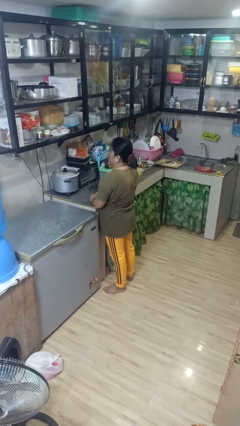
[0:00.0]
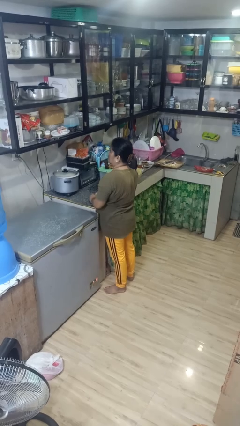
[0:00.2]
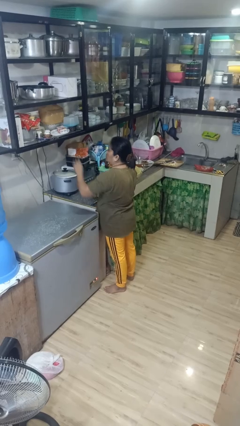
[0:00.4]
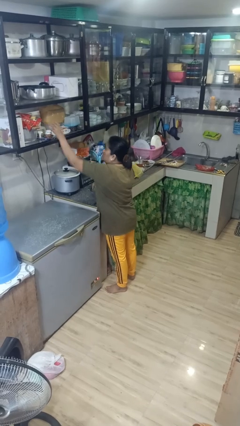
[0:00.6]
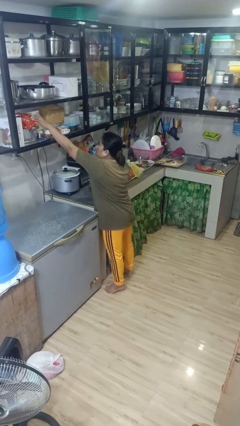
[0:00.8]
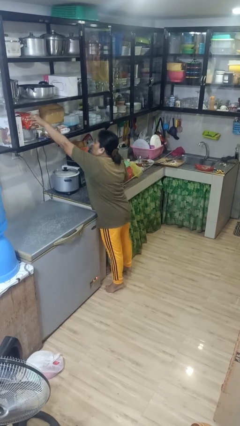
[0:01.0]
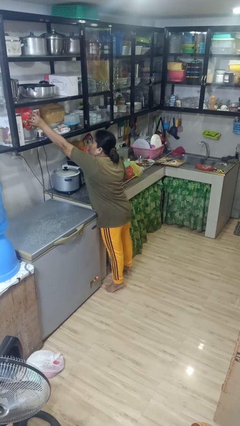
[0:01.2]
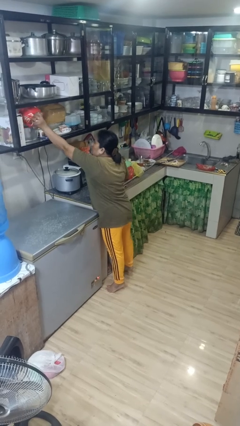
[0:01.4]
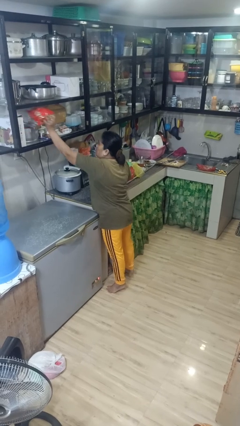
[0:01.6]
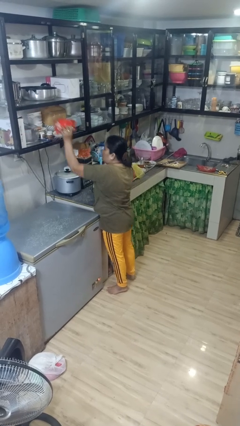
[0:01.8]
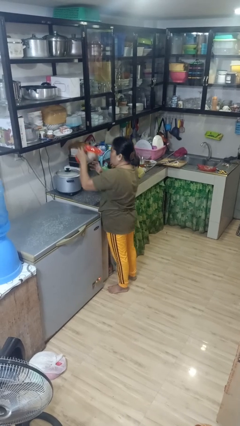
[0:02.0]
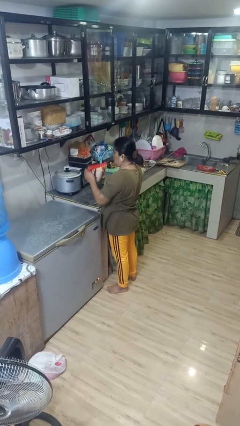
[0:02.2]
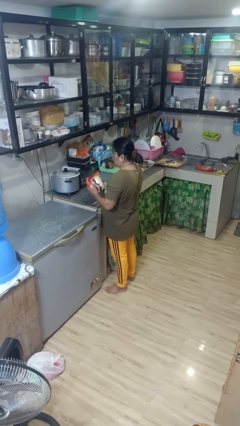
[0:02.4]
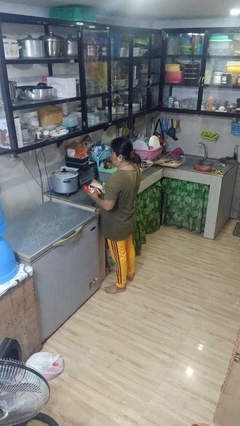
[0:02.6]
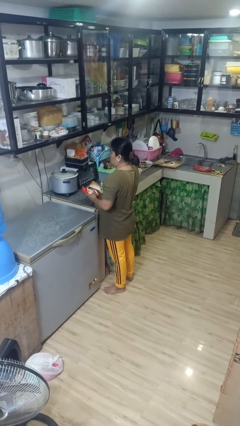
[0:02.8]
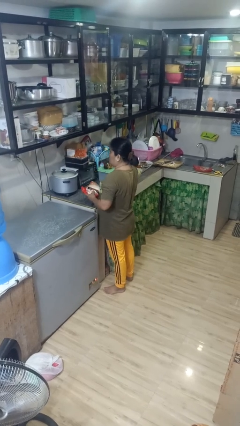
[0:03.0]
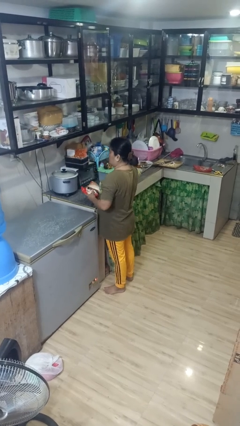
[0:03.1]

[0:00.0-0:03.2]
person takes object from cabinet

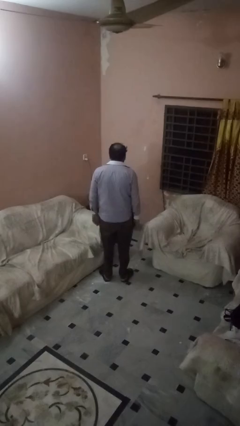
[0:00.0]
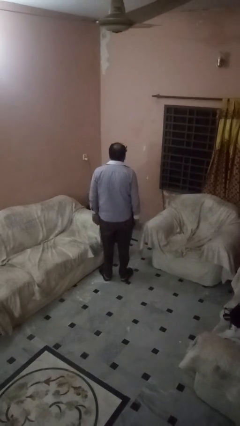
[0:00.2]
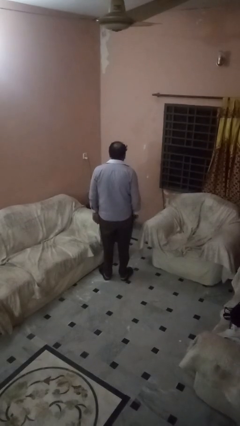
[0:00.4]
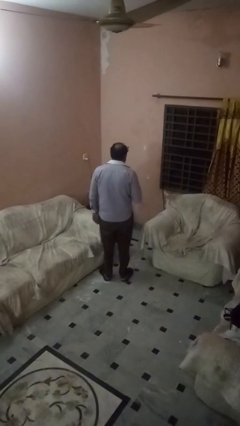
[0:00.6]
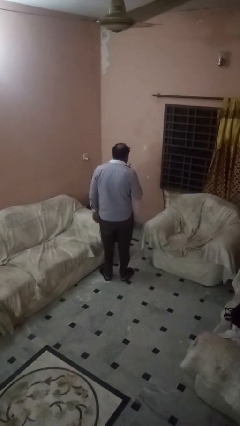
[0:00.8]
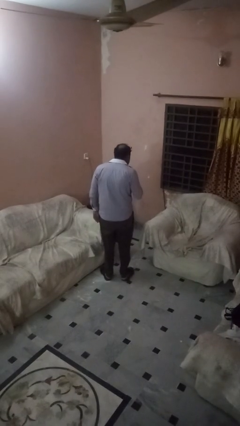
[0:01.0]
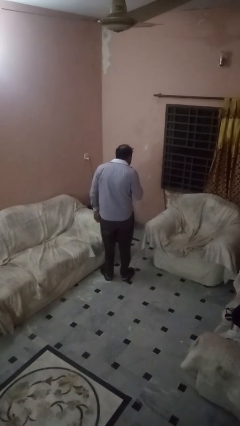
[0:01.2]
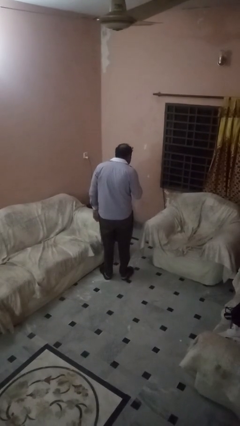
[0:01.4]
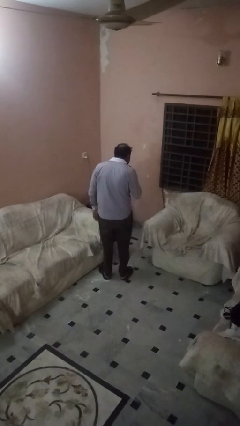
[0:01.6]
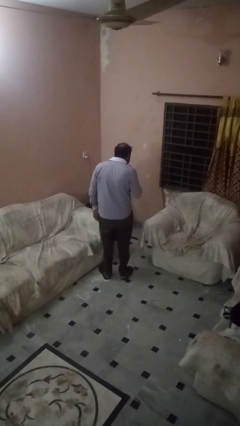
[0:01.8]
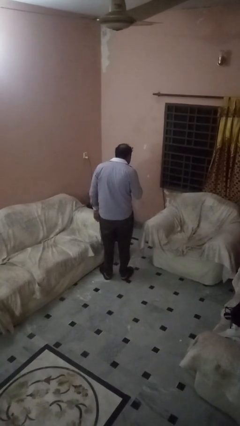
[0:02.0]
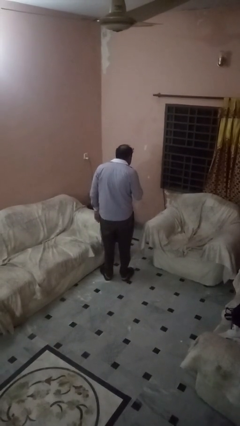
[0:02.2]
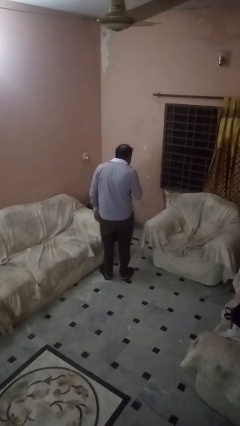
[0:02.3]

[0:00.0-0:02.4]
person gestures be quiet

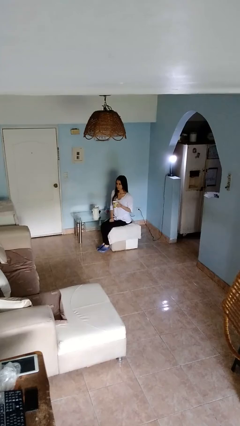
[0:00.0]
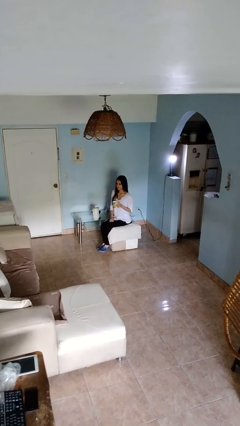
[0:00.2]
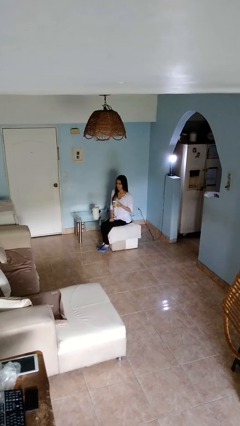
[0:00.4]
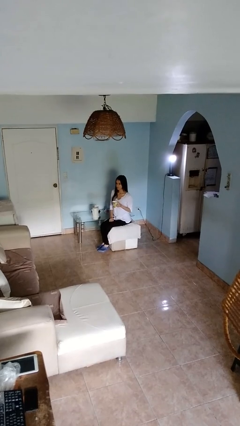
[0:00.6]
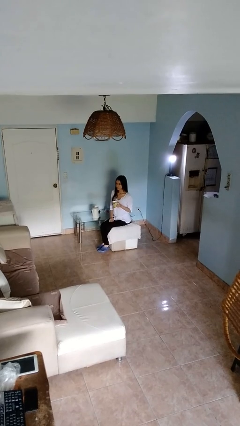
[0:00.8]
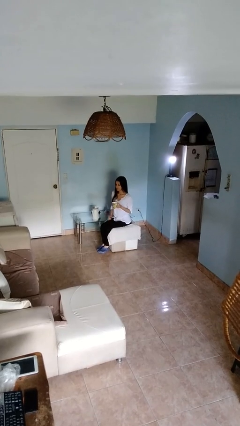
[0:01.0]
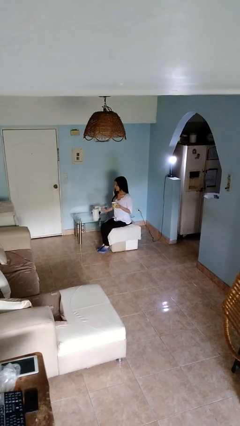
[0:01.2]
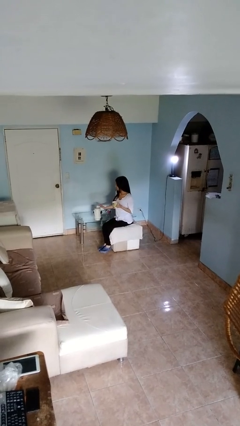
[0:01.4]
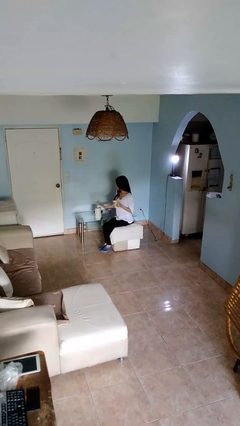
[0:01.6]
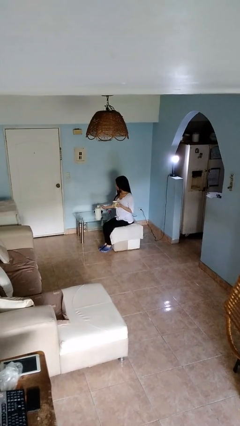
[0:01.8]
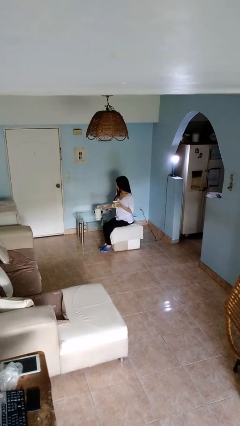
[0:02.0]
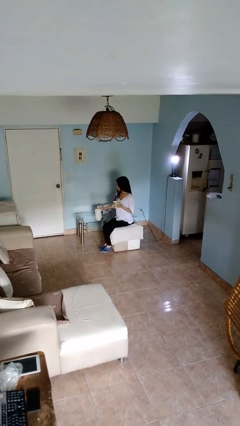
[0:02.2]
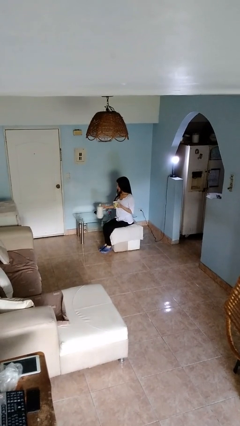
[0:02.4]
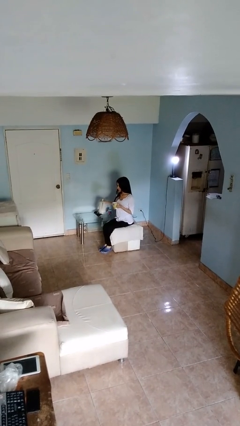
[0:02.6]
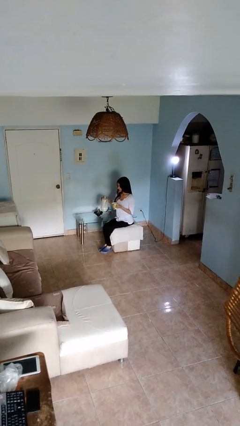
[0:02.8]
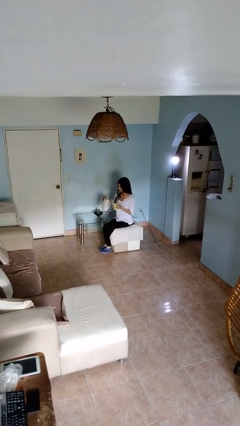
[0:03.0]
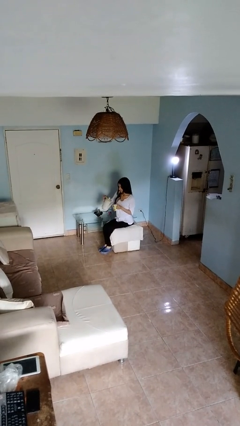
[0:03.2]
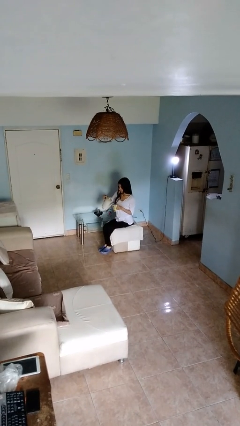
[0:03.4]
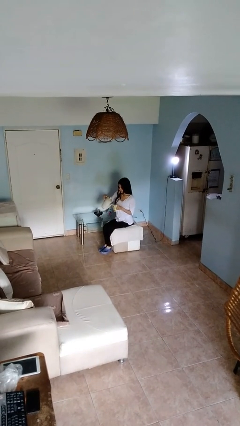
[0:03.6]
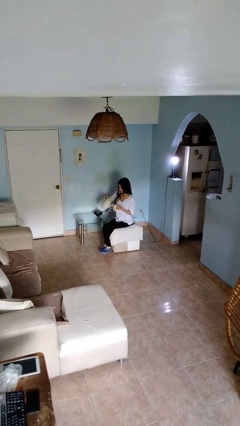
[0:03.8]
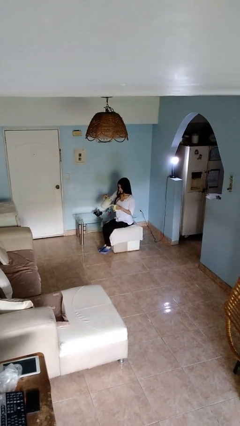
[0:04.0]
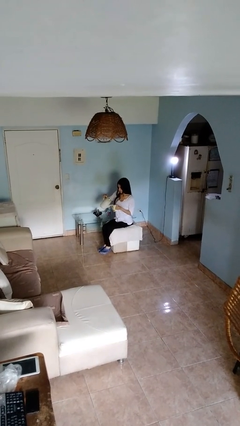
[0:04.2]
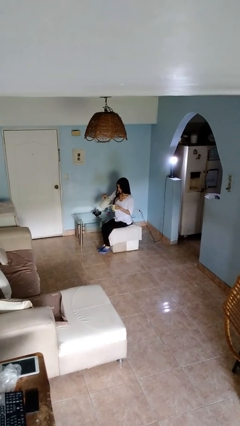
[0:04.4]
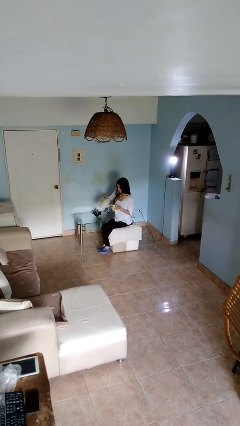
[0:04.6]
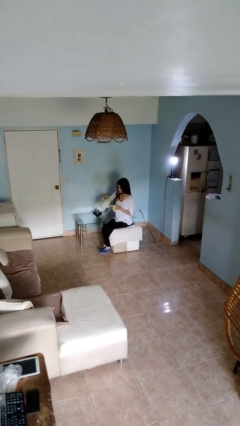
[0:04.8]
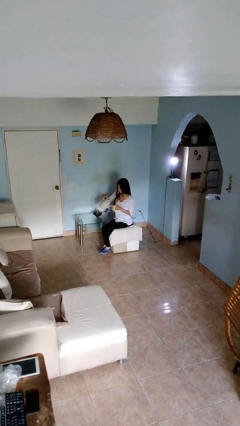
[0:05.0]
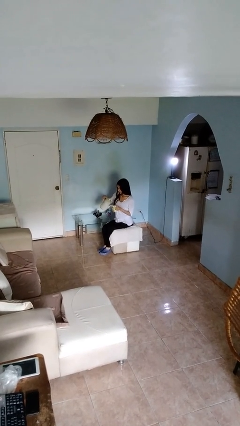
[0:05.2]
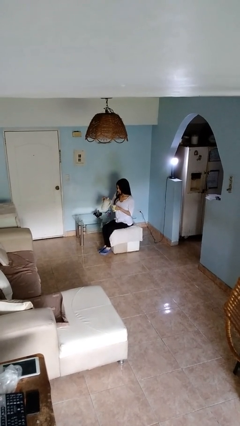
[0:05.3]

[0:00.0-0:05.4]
person pours coffee into mug

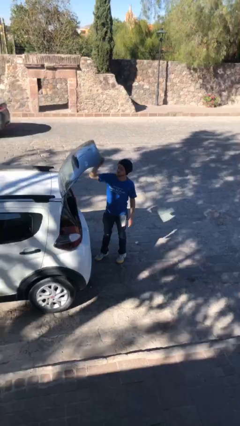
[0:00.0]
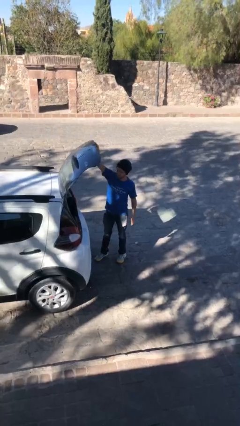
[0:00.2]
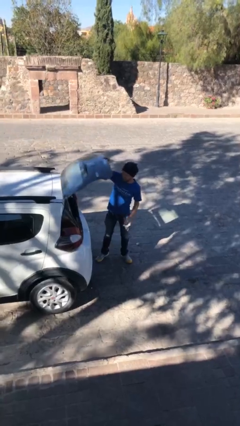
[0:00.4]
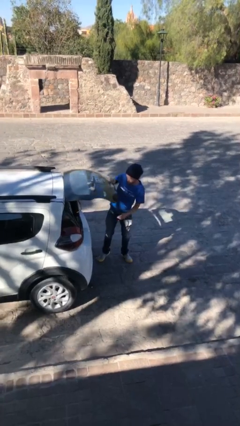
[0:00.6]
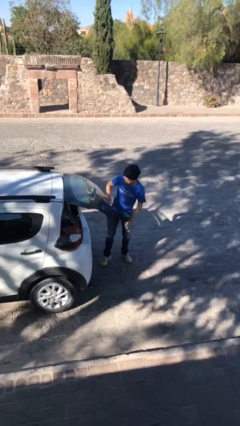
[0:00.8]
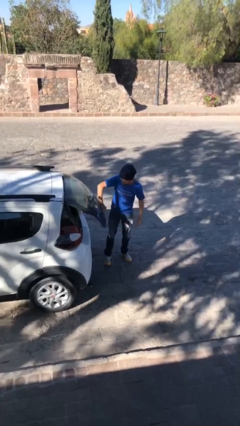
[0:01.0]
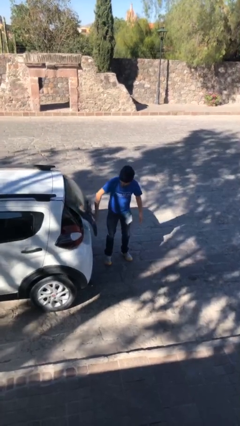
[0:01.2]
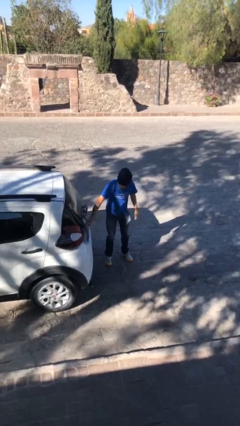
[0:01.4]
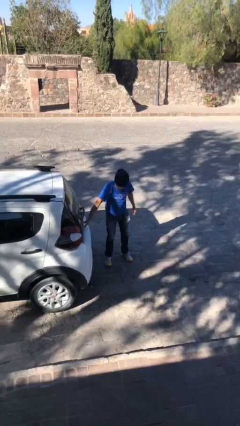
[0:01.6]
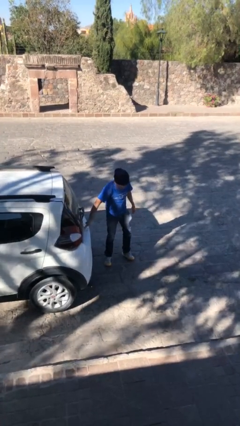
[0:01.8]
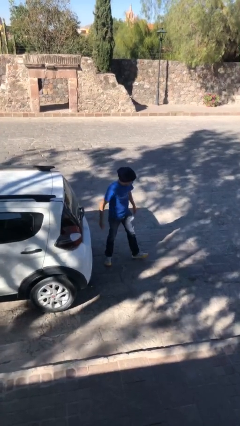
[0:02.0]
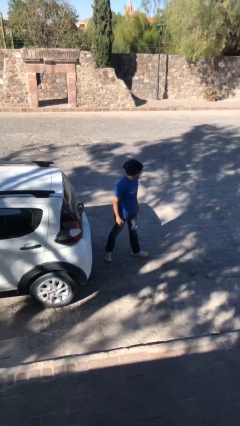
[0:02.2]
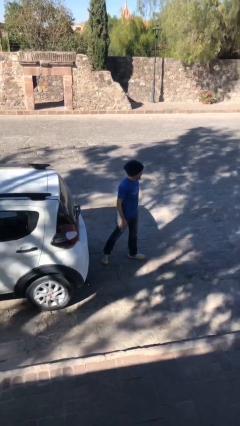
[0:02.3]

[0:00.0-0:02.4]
person closes car trunk

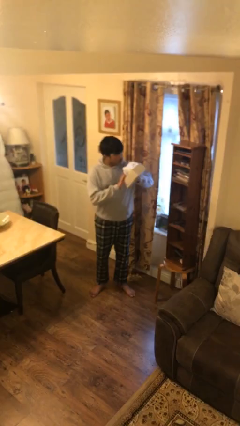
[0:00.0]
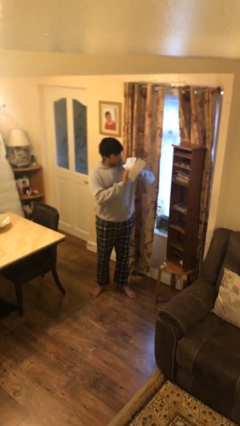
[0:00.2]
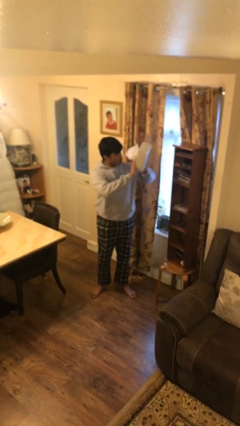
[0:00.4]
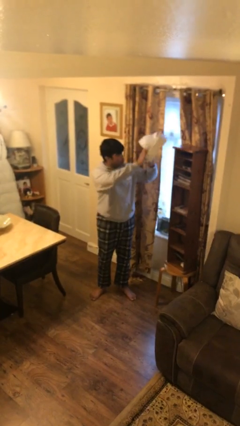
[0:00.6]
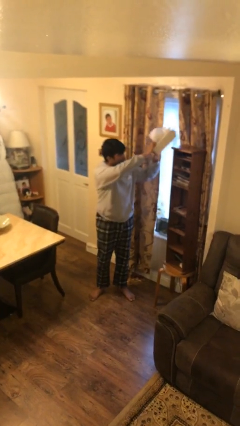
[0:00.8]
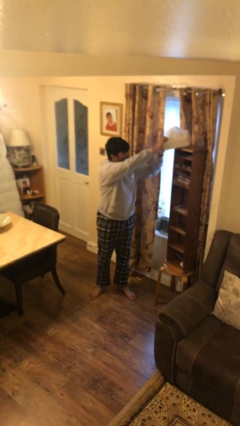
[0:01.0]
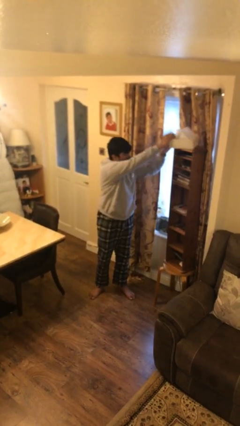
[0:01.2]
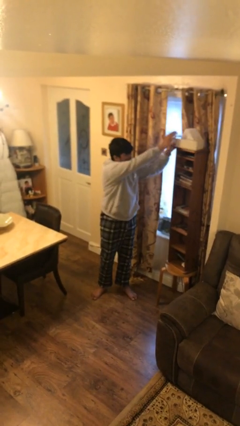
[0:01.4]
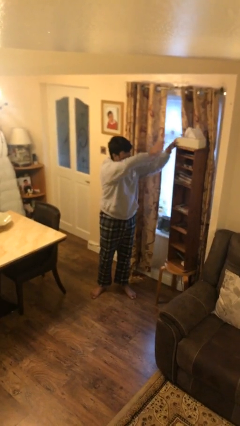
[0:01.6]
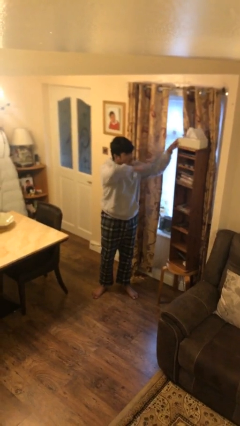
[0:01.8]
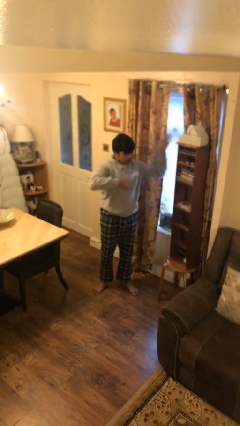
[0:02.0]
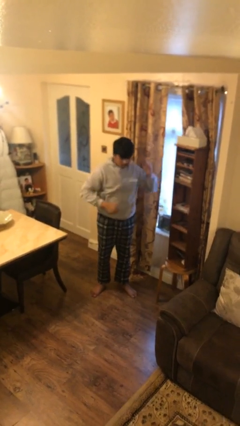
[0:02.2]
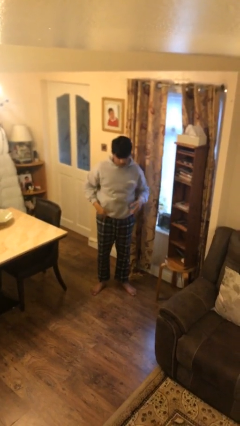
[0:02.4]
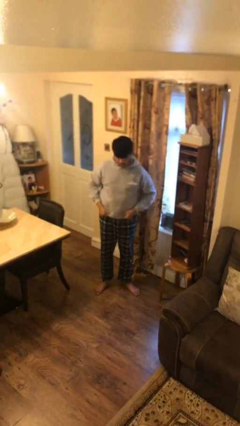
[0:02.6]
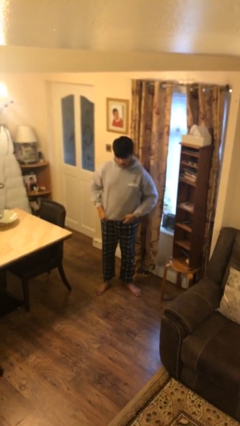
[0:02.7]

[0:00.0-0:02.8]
person puts down object on shelf

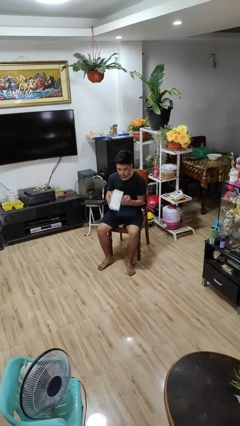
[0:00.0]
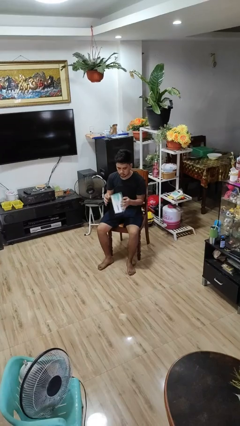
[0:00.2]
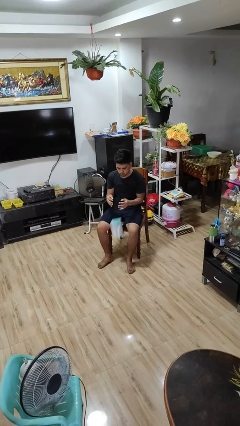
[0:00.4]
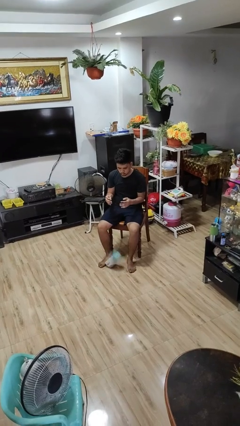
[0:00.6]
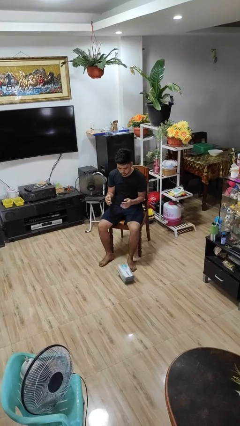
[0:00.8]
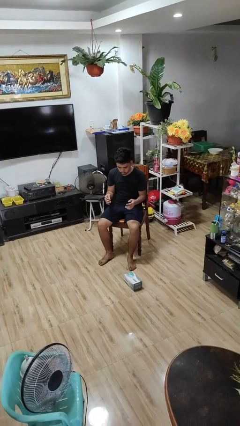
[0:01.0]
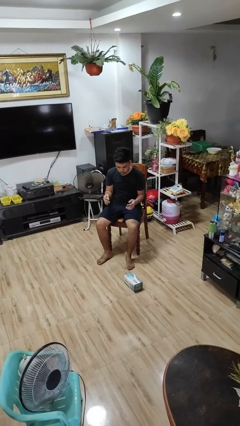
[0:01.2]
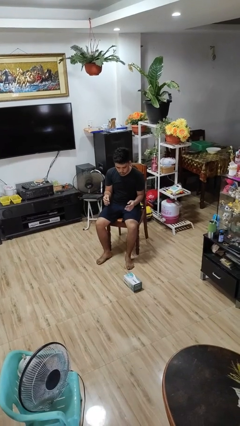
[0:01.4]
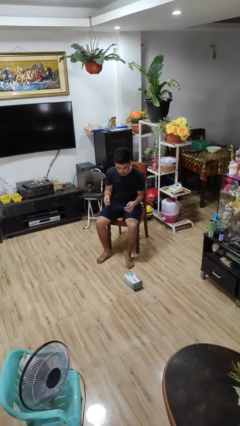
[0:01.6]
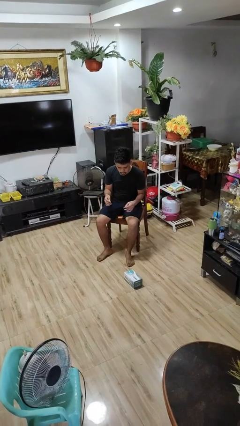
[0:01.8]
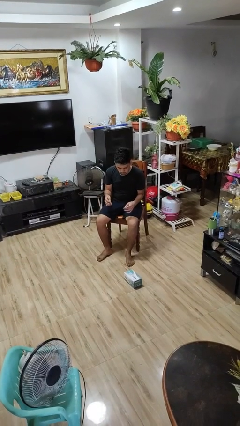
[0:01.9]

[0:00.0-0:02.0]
person drops object
